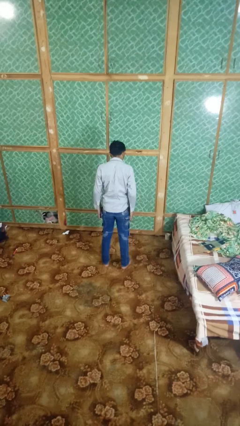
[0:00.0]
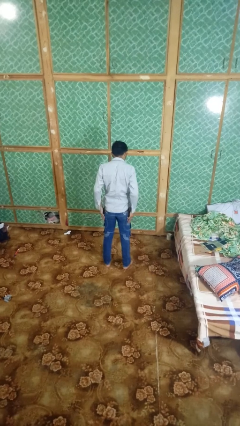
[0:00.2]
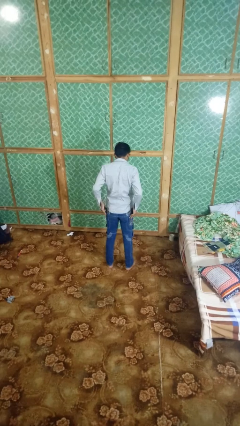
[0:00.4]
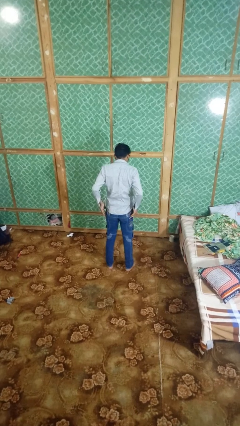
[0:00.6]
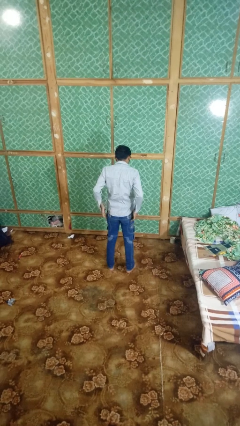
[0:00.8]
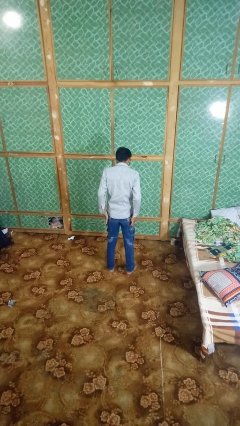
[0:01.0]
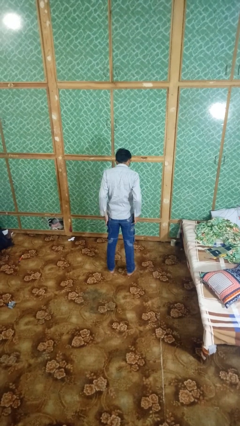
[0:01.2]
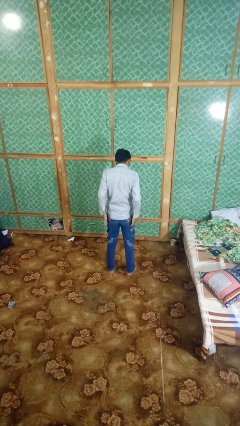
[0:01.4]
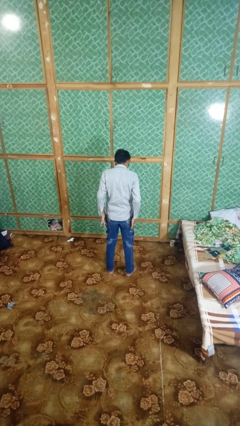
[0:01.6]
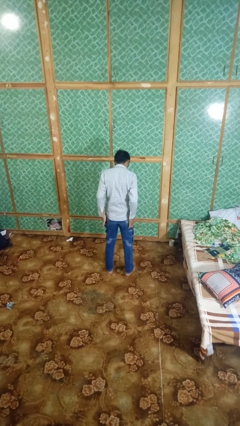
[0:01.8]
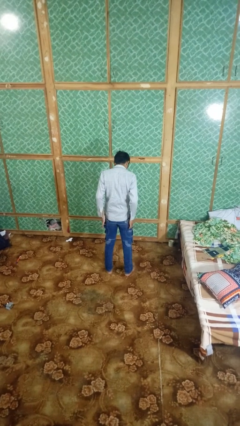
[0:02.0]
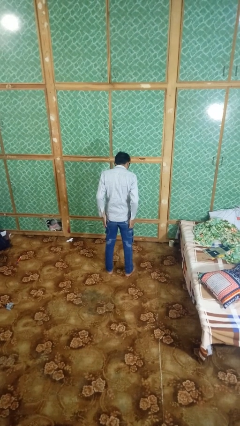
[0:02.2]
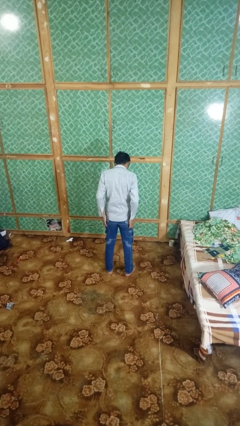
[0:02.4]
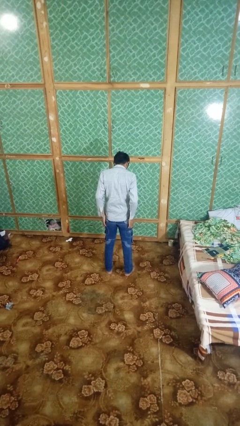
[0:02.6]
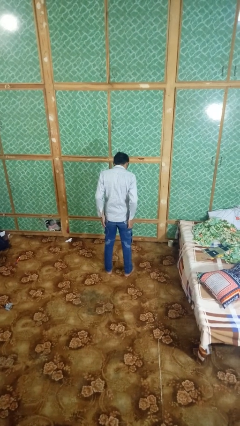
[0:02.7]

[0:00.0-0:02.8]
person puts hands in back pockets

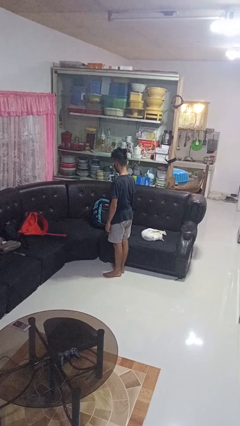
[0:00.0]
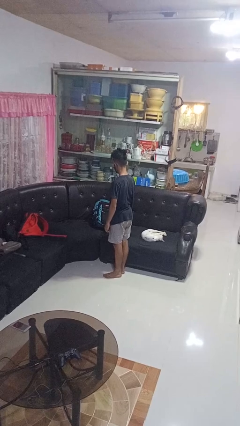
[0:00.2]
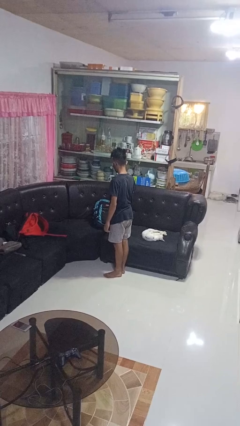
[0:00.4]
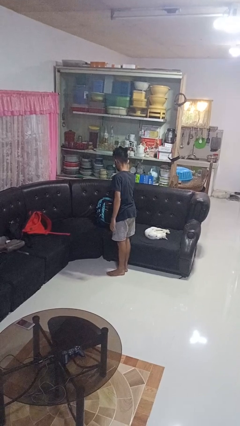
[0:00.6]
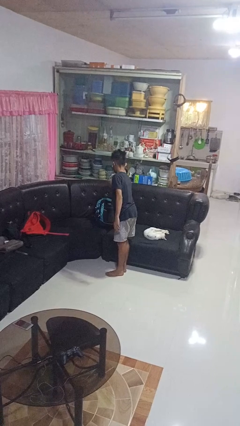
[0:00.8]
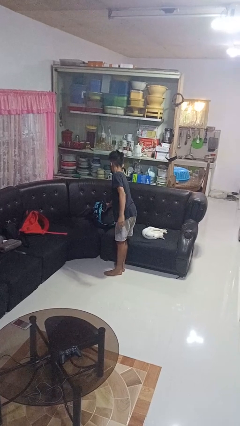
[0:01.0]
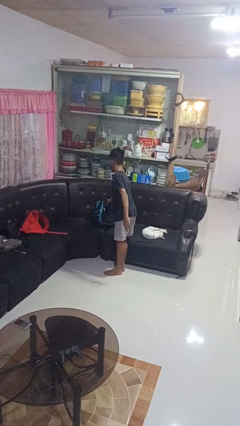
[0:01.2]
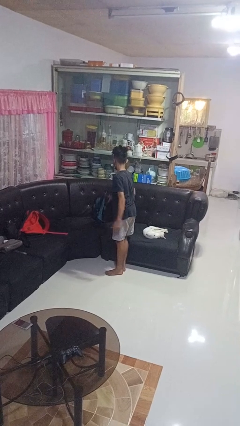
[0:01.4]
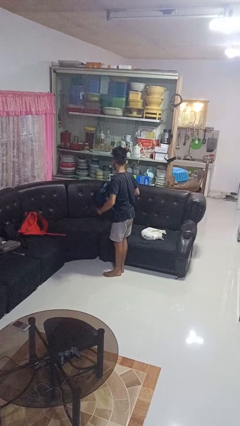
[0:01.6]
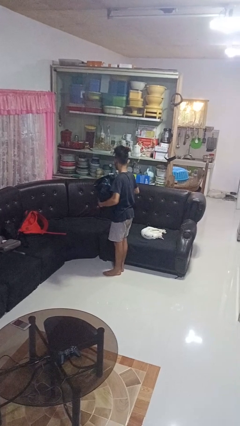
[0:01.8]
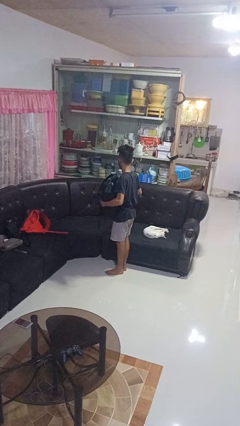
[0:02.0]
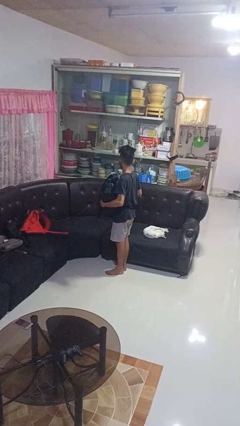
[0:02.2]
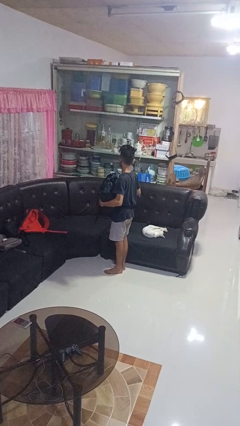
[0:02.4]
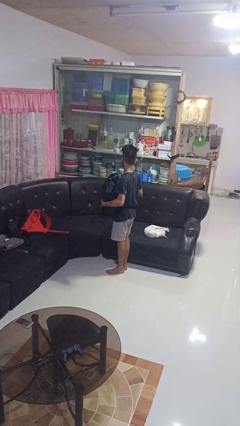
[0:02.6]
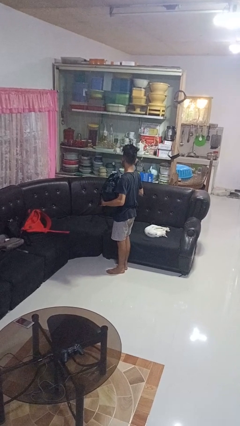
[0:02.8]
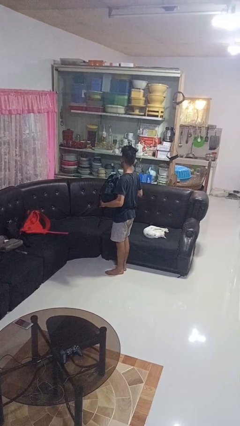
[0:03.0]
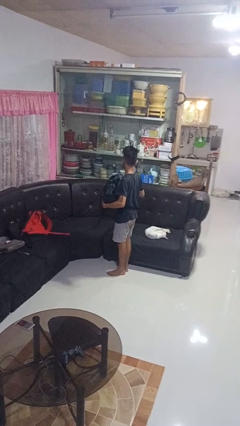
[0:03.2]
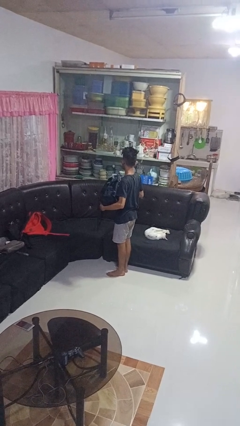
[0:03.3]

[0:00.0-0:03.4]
person picks up object from couch

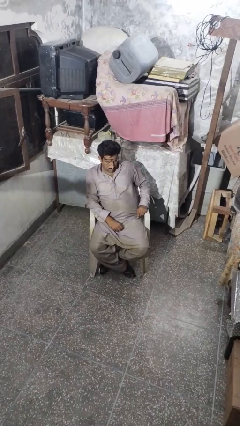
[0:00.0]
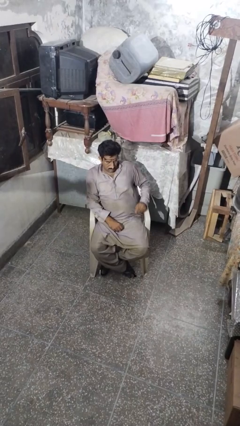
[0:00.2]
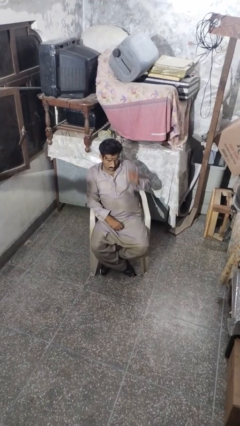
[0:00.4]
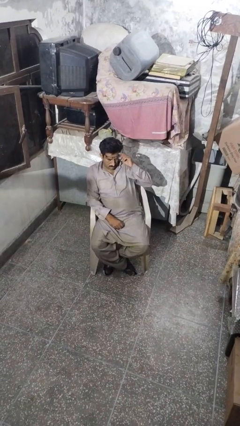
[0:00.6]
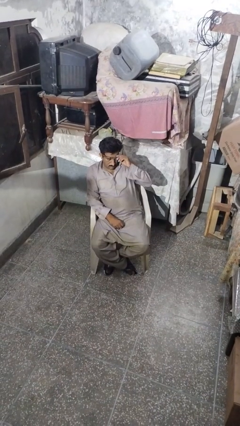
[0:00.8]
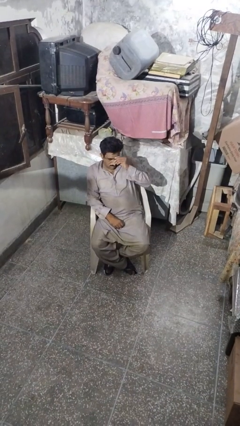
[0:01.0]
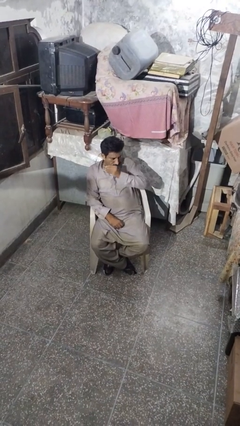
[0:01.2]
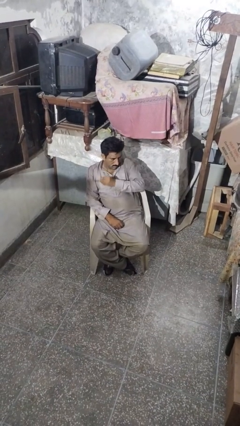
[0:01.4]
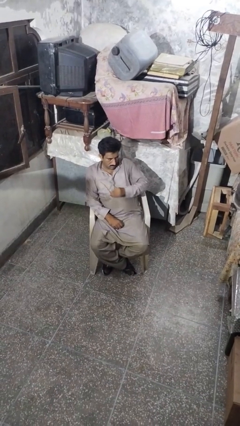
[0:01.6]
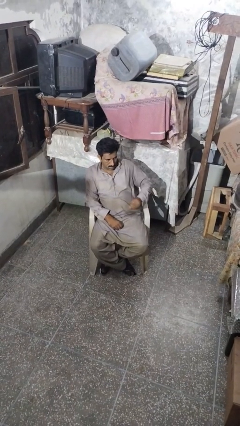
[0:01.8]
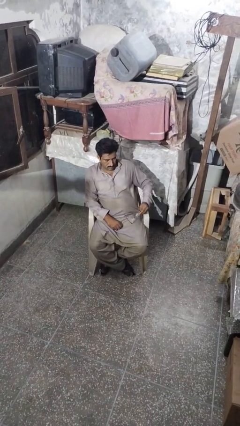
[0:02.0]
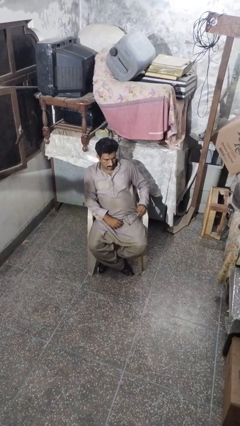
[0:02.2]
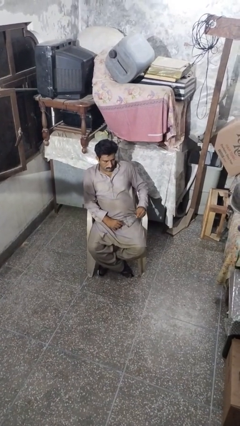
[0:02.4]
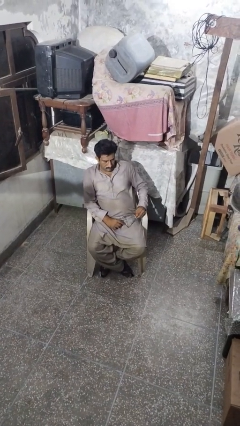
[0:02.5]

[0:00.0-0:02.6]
person takes off glasses

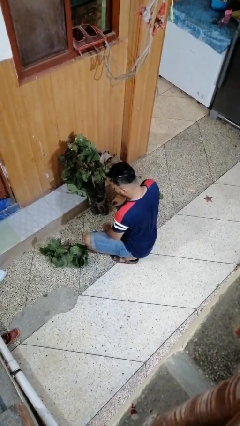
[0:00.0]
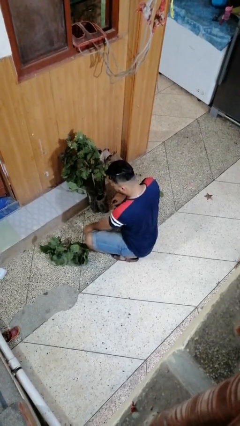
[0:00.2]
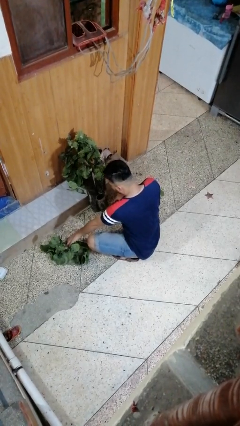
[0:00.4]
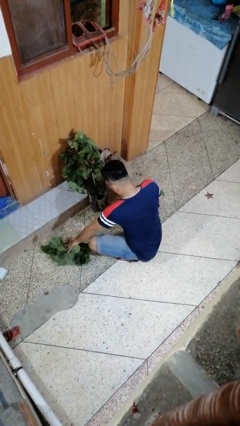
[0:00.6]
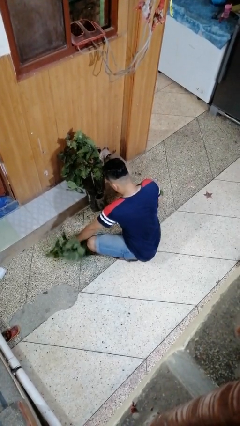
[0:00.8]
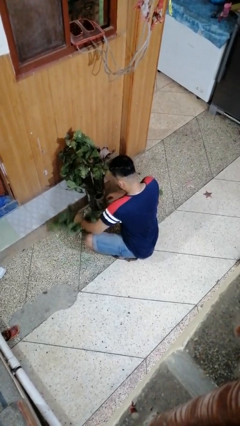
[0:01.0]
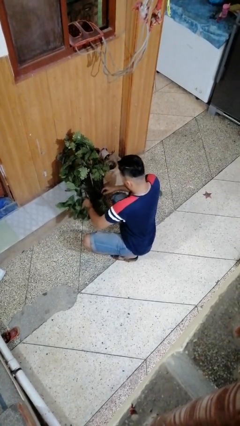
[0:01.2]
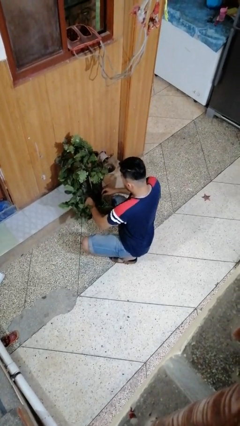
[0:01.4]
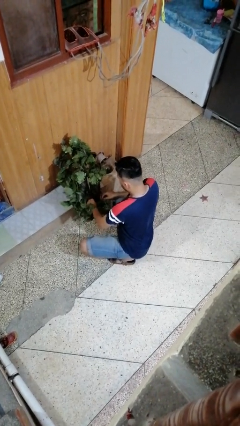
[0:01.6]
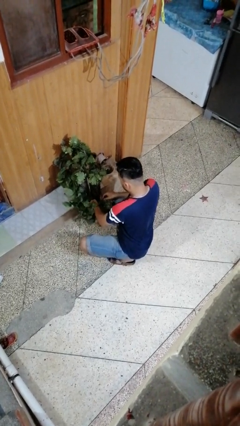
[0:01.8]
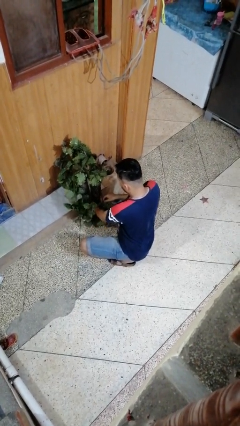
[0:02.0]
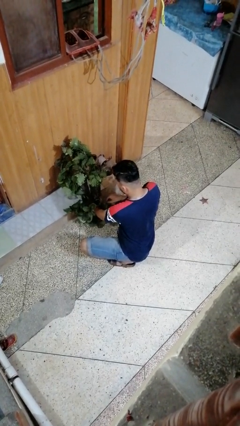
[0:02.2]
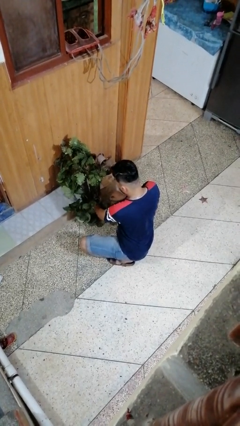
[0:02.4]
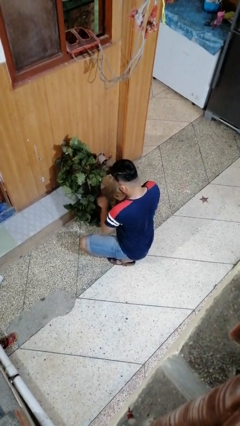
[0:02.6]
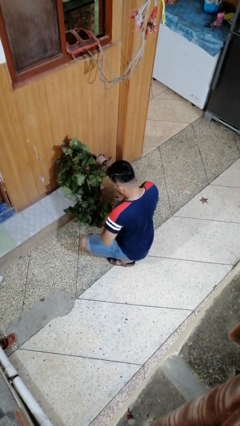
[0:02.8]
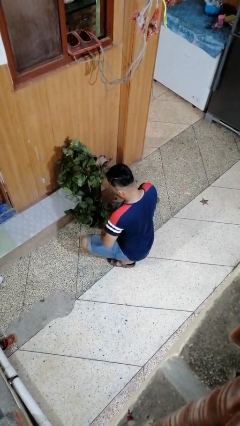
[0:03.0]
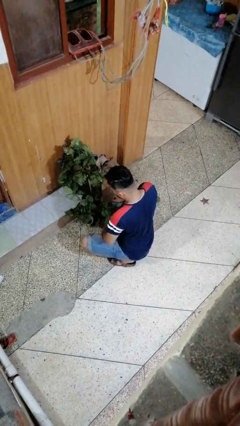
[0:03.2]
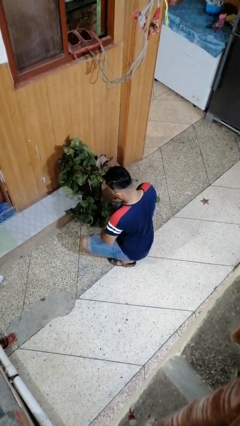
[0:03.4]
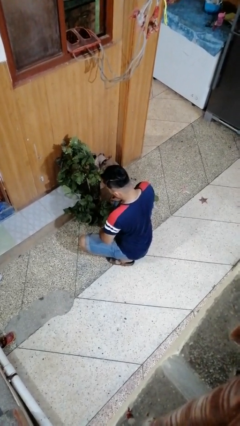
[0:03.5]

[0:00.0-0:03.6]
person arranges flowers in vase

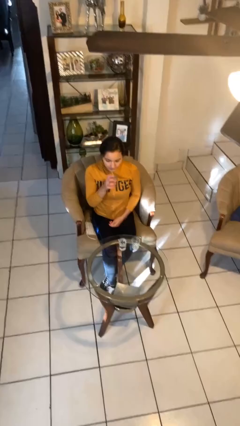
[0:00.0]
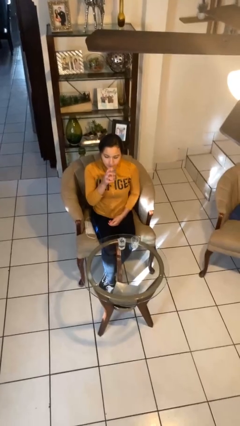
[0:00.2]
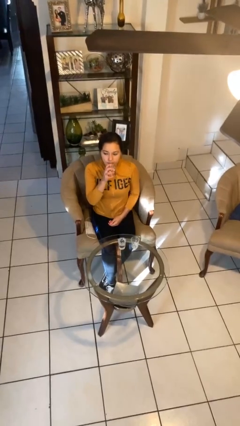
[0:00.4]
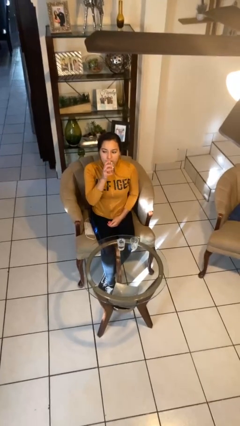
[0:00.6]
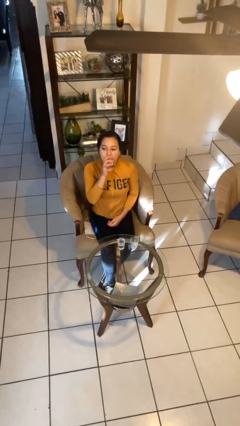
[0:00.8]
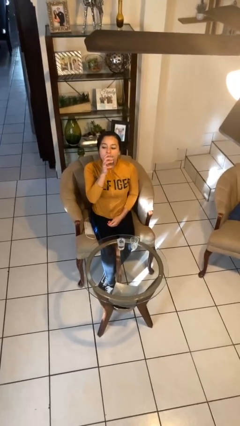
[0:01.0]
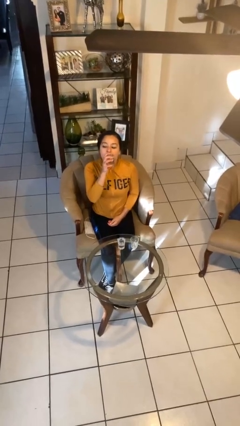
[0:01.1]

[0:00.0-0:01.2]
person drinks from shotglass

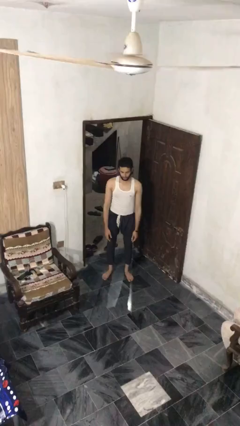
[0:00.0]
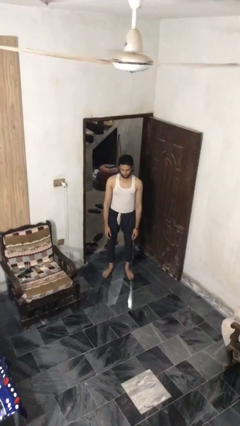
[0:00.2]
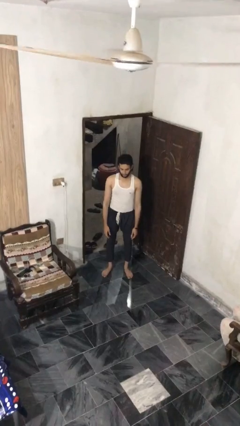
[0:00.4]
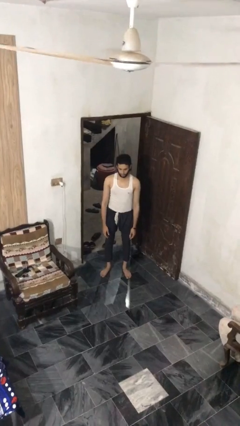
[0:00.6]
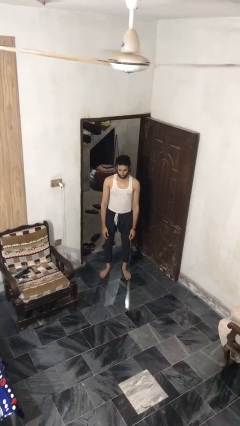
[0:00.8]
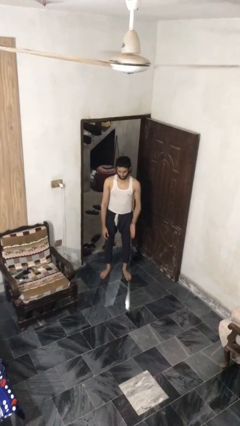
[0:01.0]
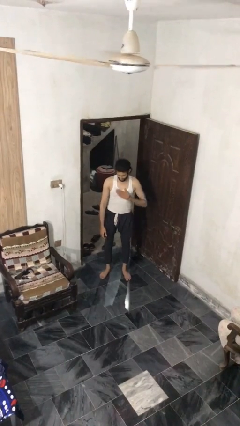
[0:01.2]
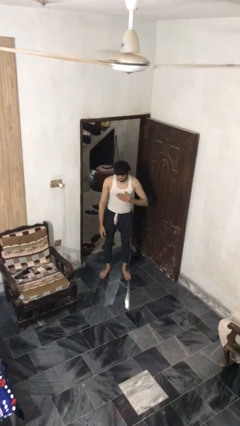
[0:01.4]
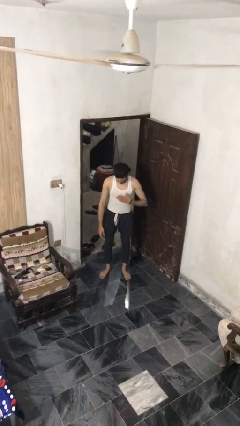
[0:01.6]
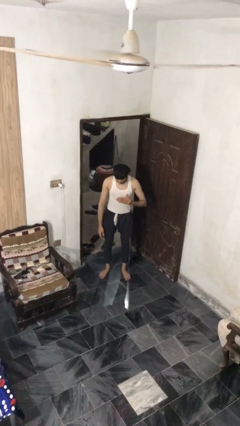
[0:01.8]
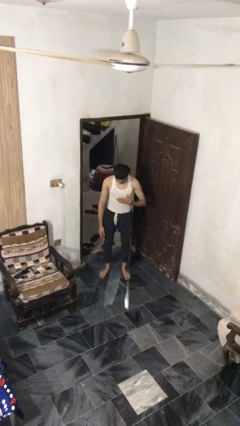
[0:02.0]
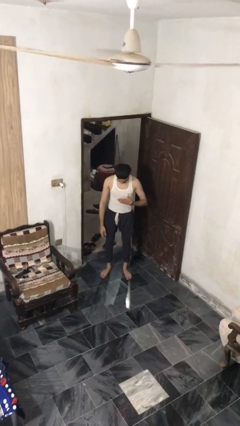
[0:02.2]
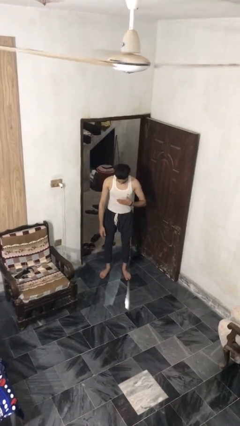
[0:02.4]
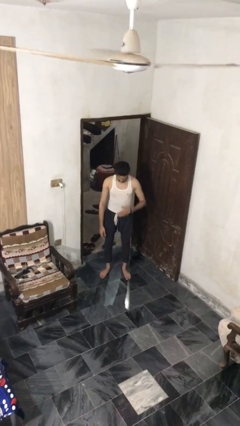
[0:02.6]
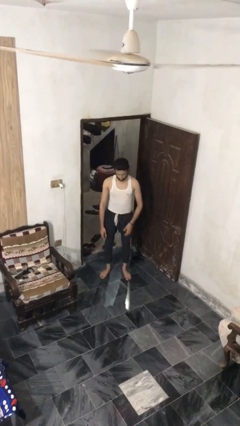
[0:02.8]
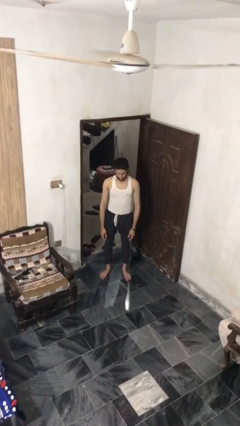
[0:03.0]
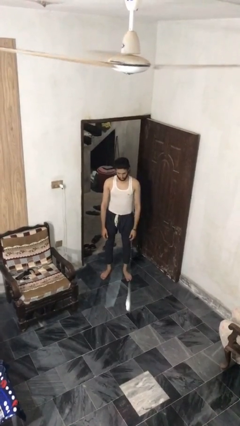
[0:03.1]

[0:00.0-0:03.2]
person swats bug

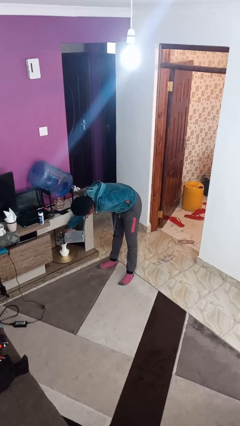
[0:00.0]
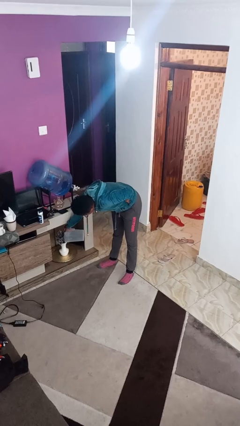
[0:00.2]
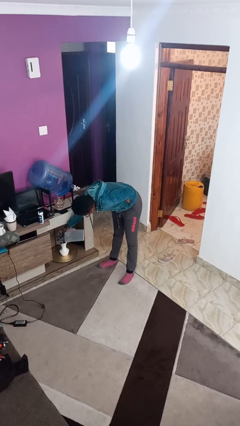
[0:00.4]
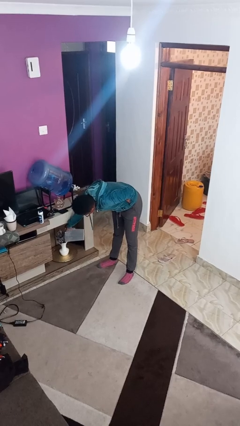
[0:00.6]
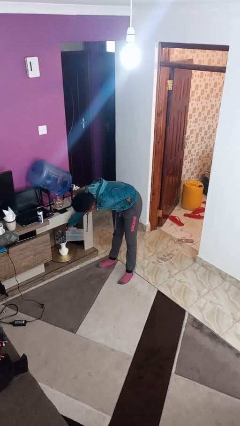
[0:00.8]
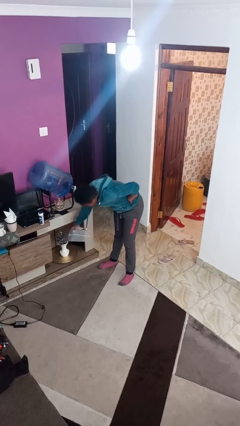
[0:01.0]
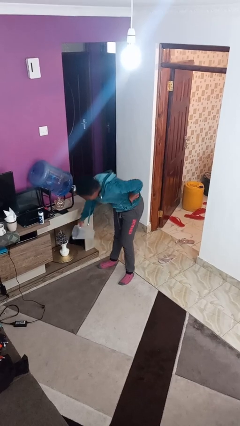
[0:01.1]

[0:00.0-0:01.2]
person waters houseplant
